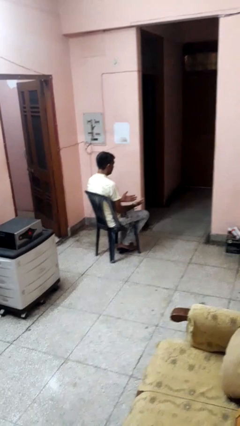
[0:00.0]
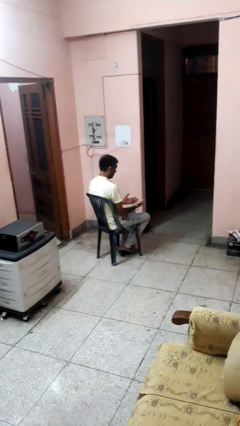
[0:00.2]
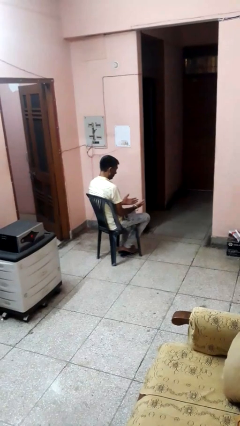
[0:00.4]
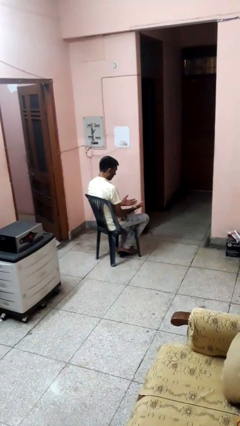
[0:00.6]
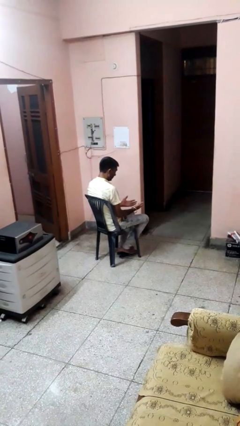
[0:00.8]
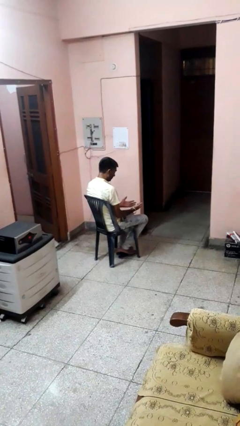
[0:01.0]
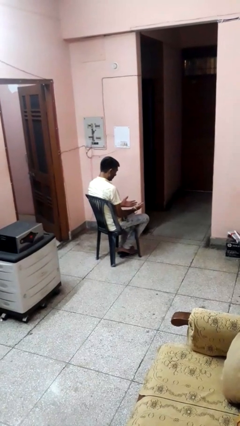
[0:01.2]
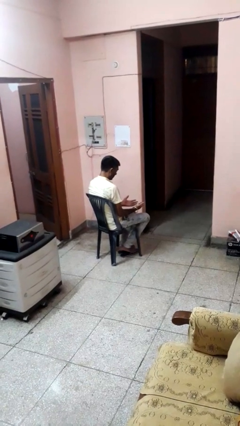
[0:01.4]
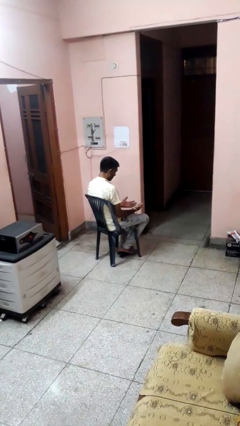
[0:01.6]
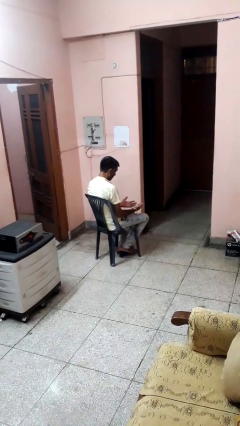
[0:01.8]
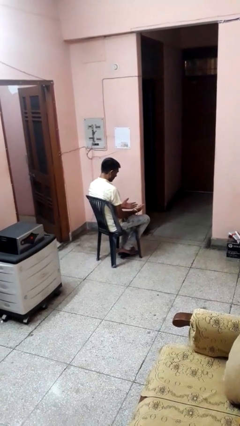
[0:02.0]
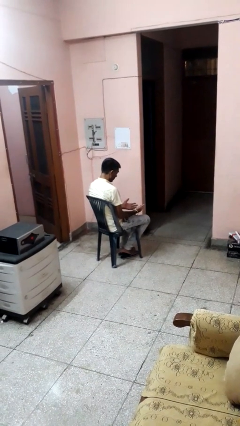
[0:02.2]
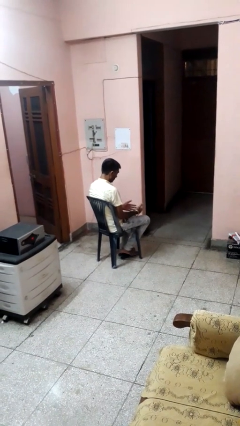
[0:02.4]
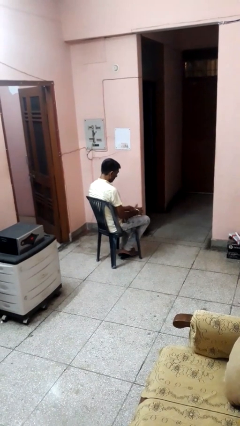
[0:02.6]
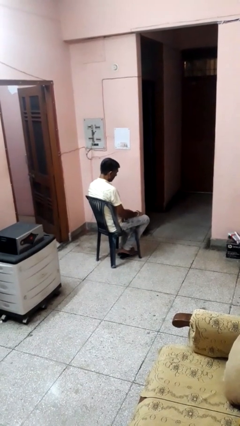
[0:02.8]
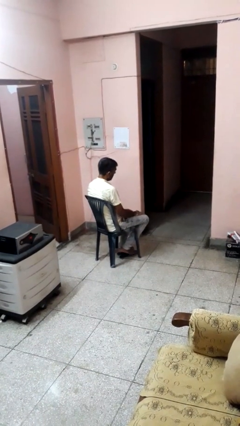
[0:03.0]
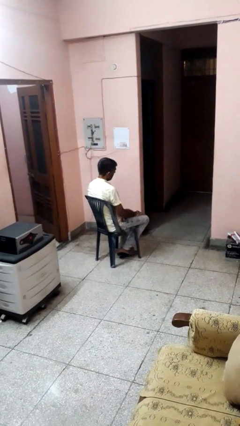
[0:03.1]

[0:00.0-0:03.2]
person looks at hands in lap

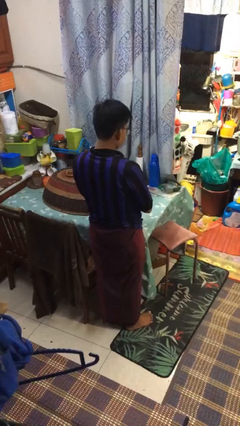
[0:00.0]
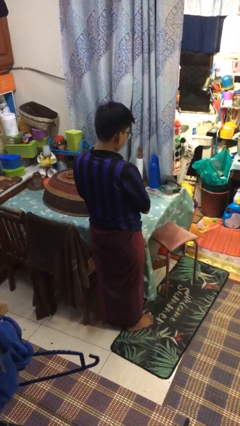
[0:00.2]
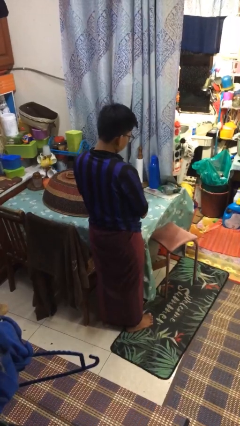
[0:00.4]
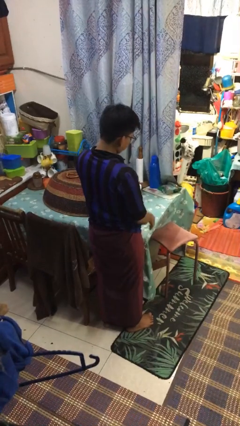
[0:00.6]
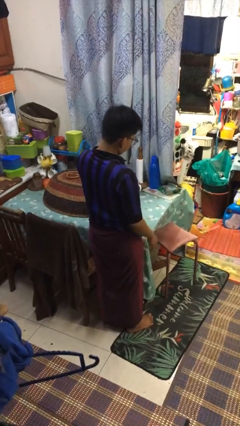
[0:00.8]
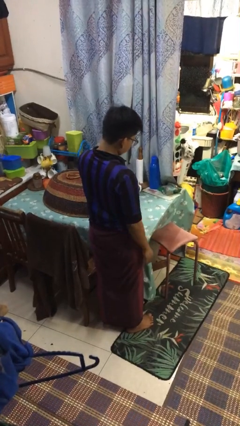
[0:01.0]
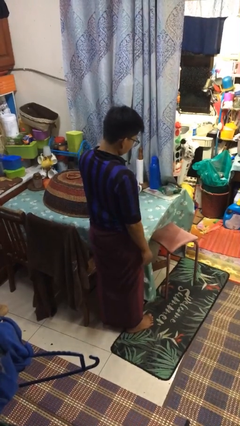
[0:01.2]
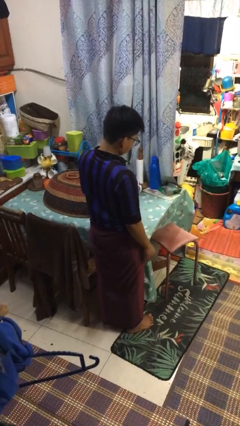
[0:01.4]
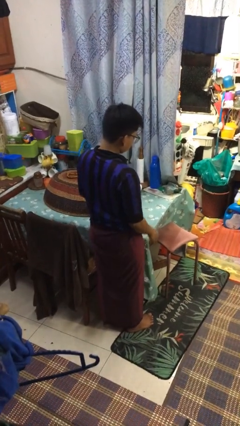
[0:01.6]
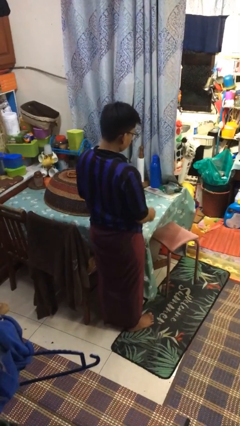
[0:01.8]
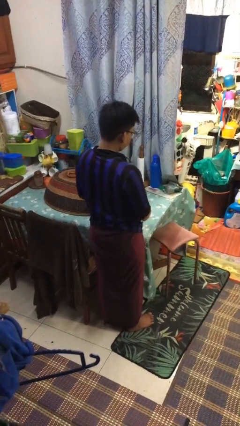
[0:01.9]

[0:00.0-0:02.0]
person sprays from bottle

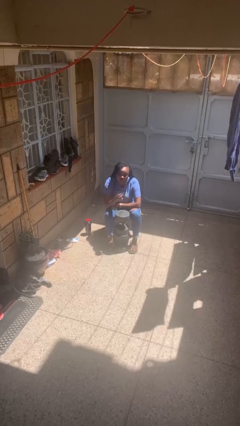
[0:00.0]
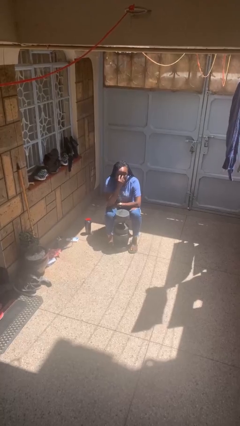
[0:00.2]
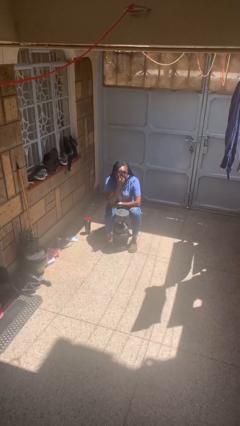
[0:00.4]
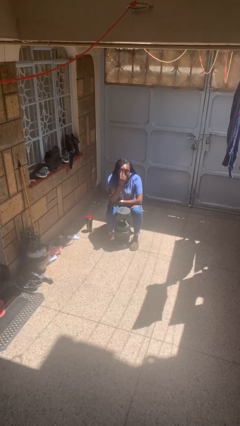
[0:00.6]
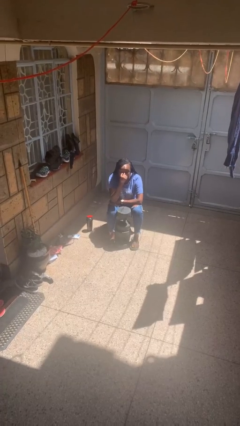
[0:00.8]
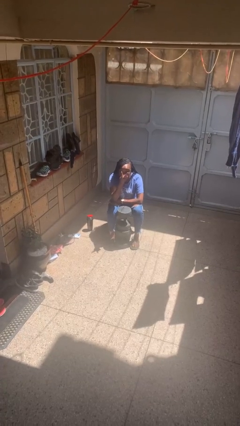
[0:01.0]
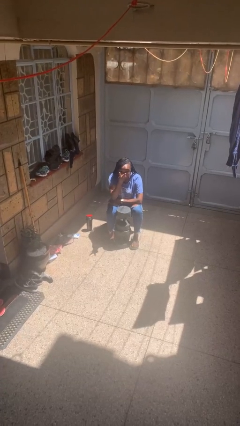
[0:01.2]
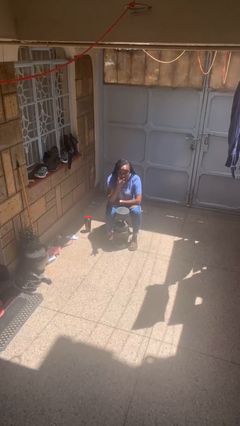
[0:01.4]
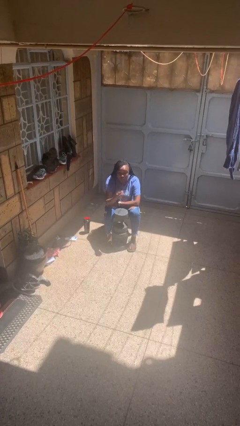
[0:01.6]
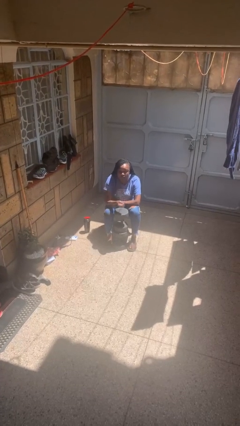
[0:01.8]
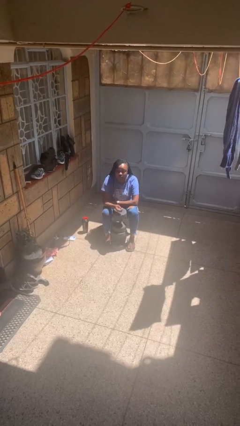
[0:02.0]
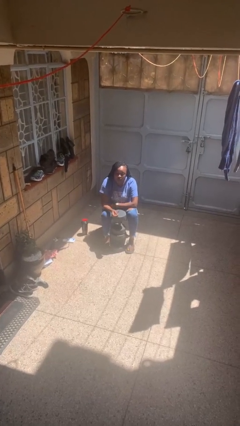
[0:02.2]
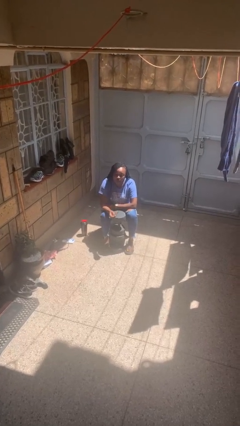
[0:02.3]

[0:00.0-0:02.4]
person gestures watch closely

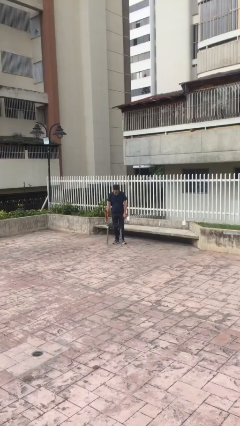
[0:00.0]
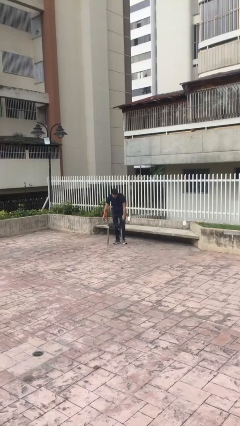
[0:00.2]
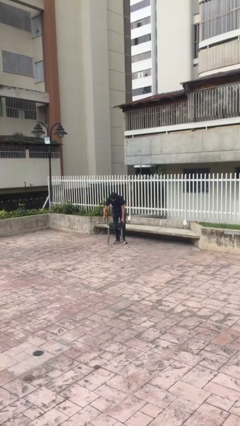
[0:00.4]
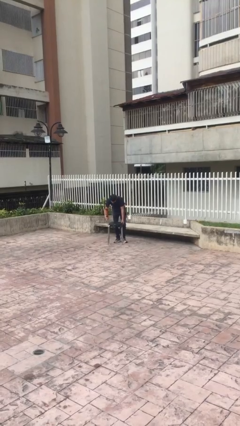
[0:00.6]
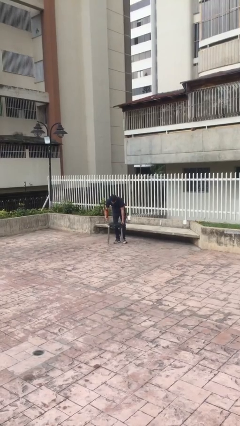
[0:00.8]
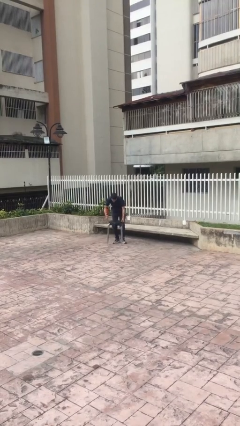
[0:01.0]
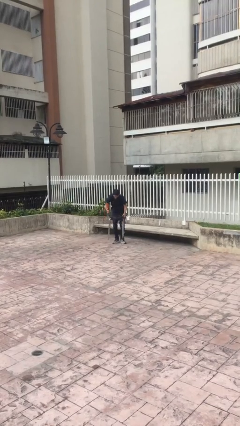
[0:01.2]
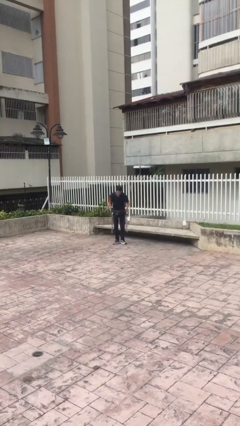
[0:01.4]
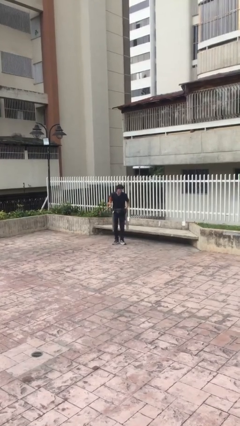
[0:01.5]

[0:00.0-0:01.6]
person picks up object from floor

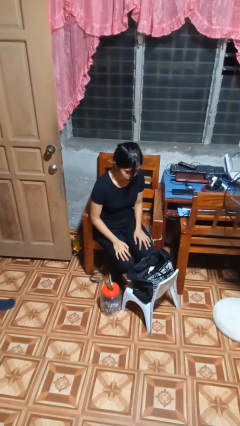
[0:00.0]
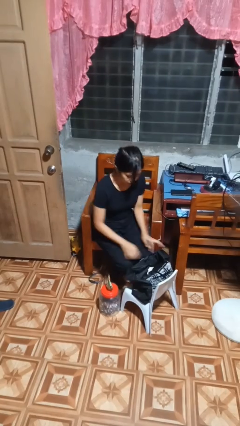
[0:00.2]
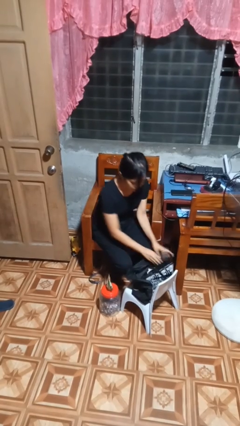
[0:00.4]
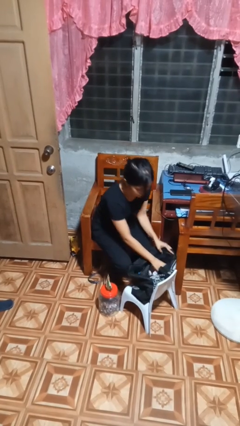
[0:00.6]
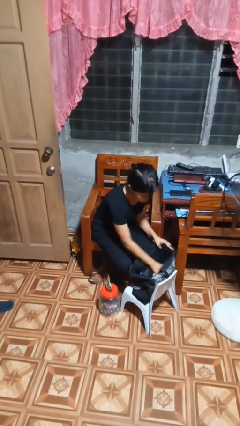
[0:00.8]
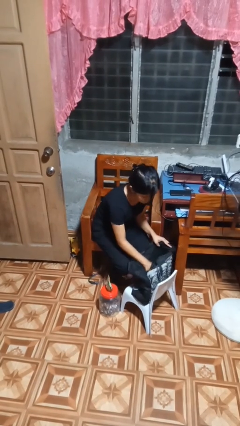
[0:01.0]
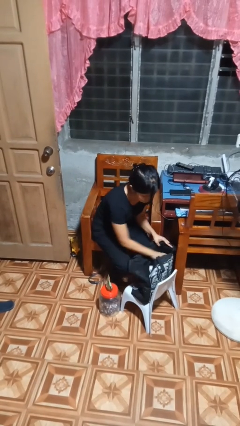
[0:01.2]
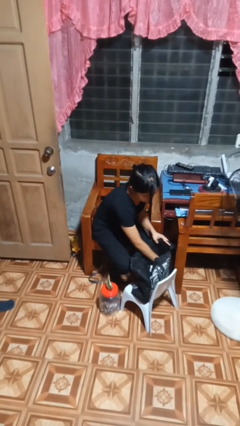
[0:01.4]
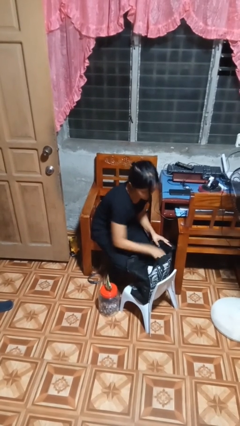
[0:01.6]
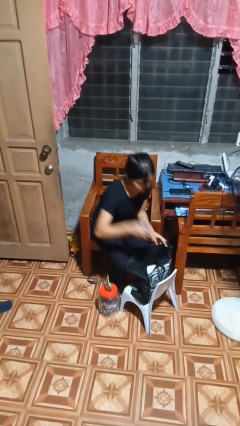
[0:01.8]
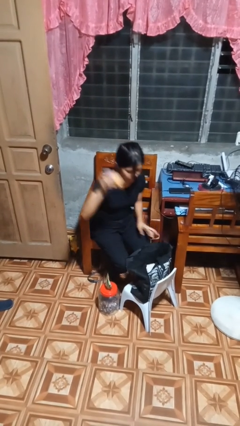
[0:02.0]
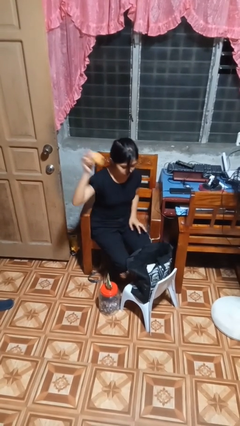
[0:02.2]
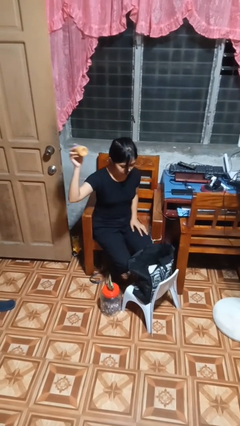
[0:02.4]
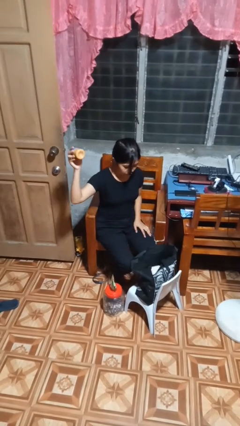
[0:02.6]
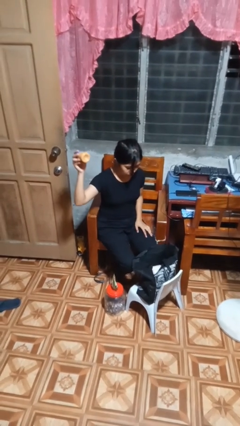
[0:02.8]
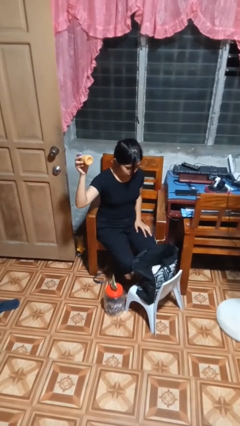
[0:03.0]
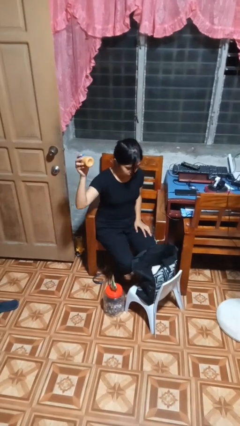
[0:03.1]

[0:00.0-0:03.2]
person searches in bag

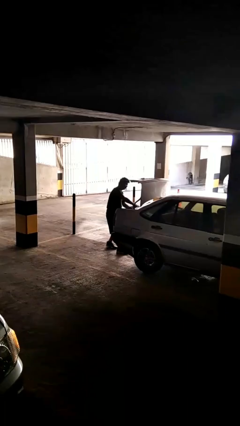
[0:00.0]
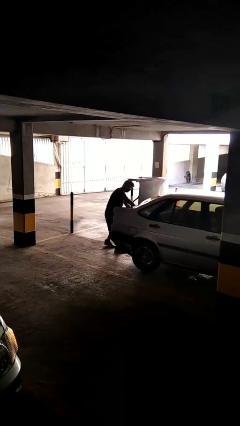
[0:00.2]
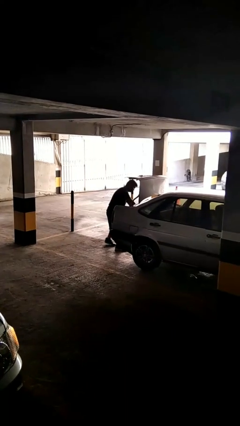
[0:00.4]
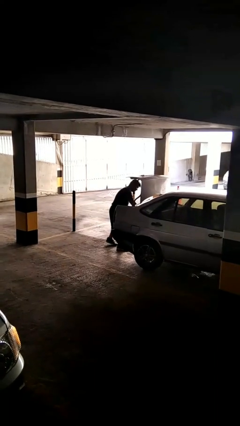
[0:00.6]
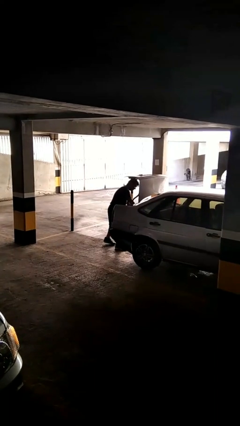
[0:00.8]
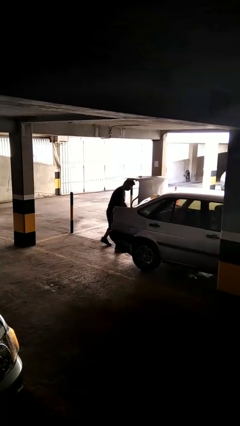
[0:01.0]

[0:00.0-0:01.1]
person loads car

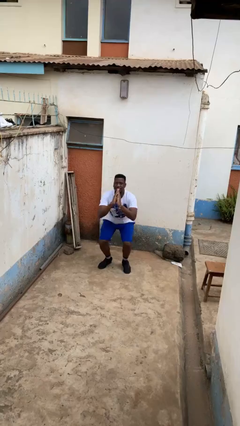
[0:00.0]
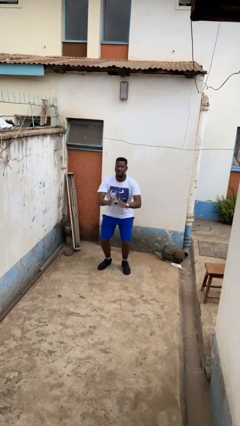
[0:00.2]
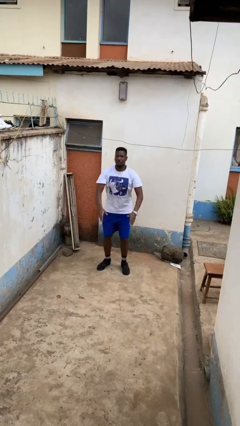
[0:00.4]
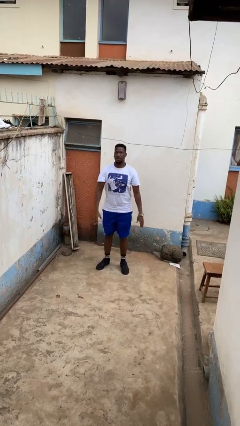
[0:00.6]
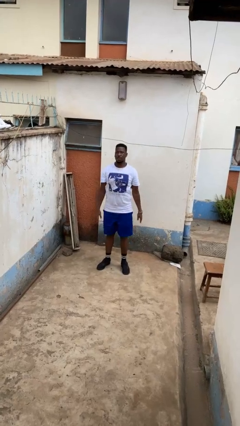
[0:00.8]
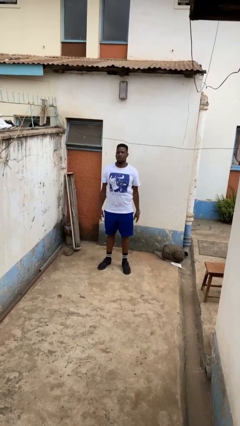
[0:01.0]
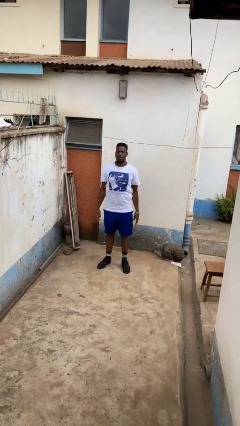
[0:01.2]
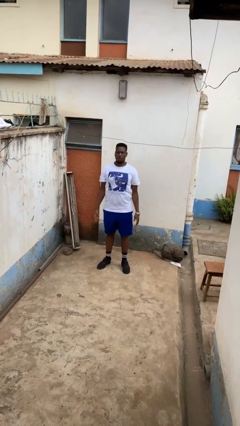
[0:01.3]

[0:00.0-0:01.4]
person stands up

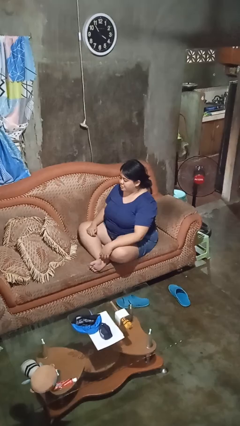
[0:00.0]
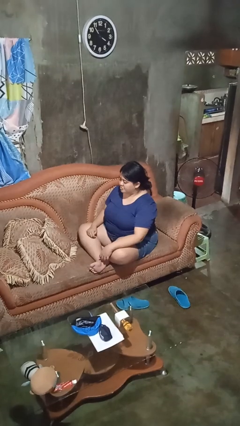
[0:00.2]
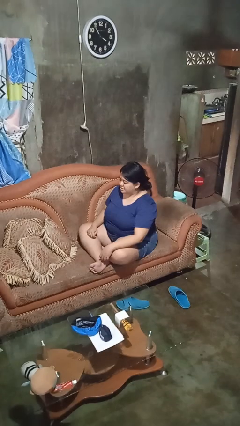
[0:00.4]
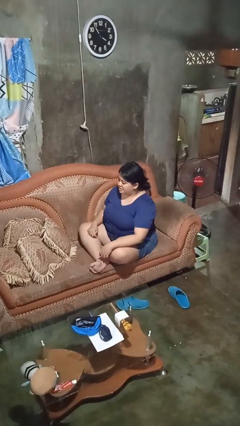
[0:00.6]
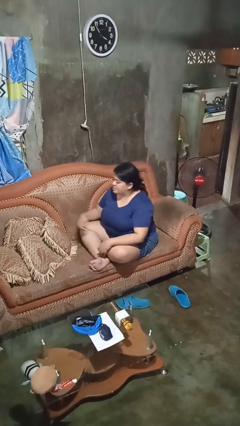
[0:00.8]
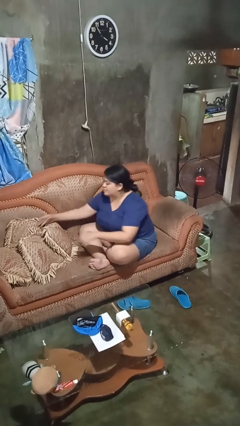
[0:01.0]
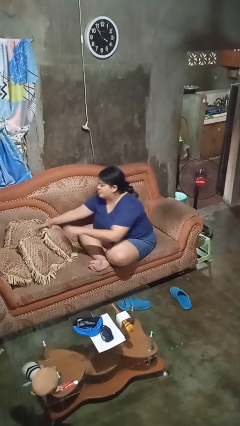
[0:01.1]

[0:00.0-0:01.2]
person searches in couch

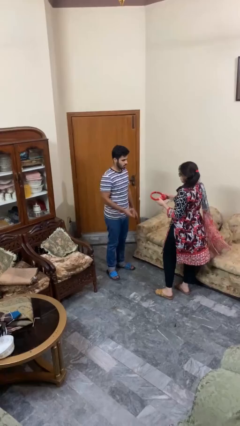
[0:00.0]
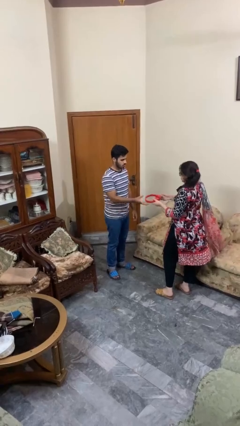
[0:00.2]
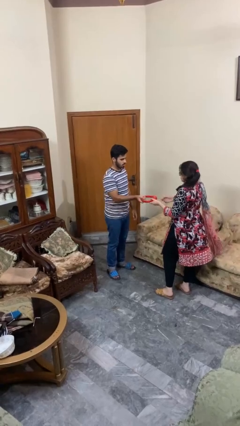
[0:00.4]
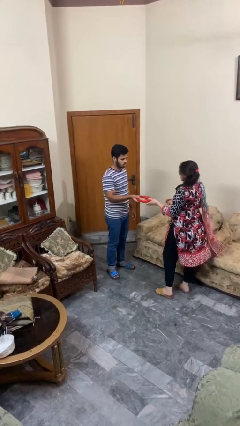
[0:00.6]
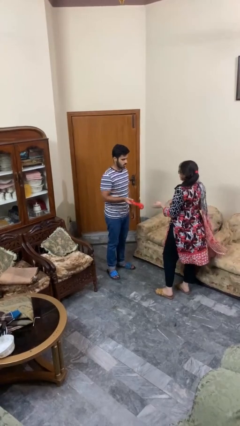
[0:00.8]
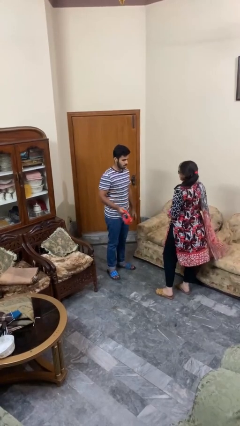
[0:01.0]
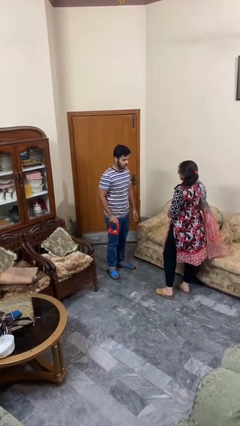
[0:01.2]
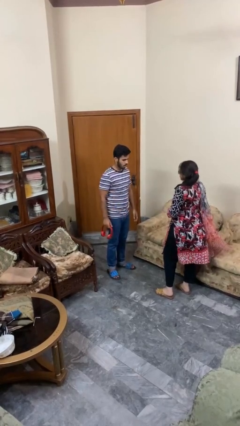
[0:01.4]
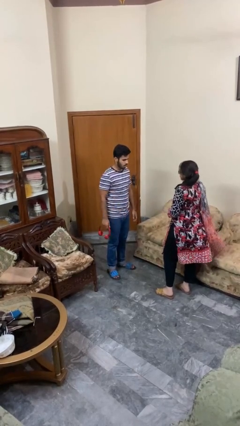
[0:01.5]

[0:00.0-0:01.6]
person transfers object to person
